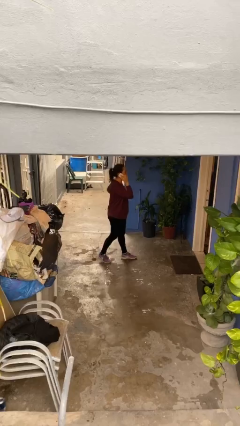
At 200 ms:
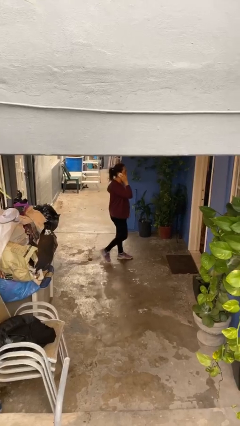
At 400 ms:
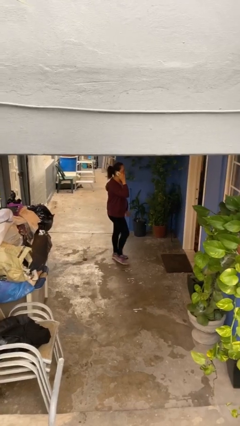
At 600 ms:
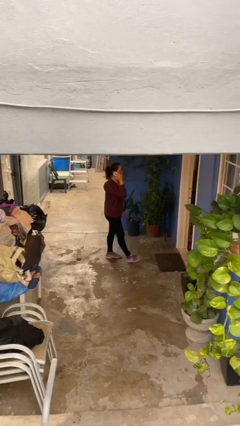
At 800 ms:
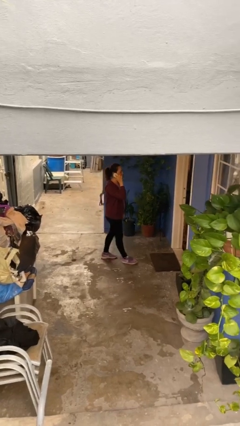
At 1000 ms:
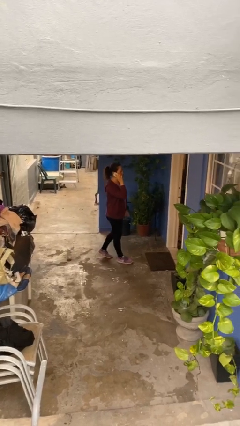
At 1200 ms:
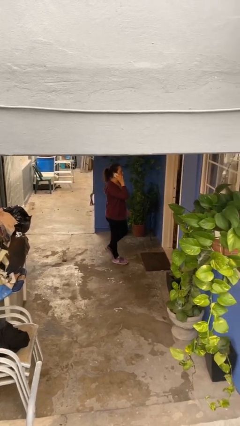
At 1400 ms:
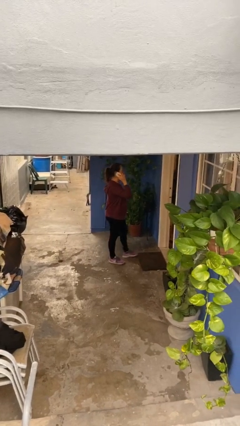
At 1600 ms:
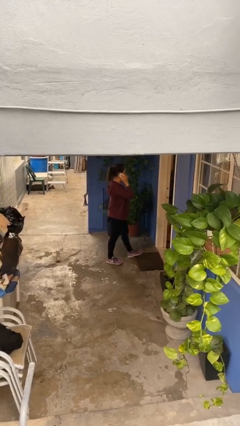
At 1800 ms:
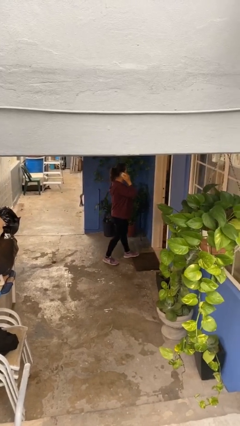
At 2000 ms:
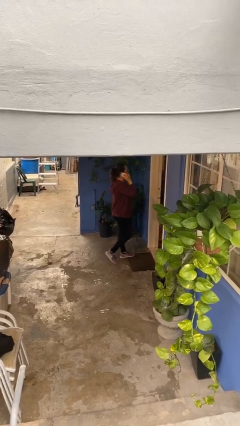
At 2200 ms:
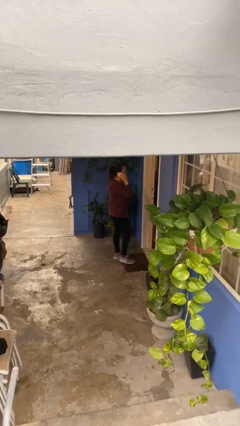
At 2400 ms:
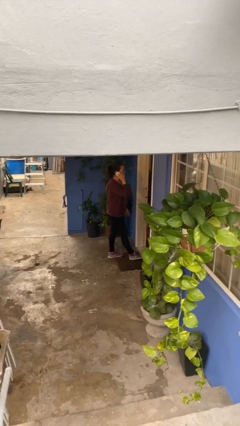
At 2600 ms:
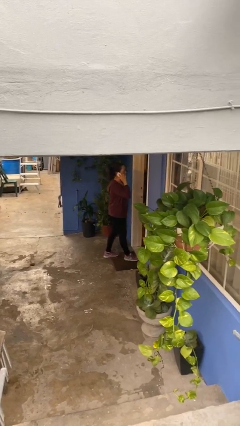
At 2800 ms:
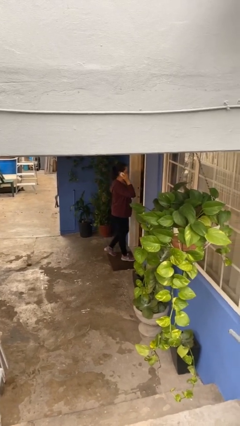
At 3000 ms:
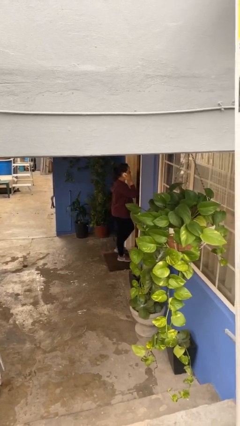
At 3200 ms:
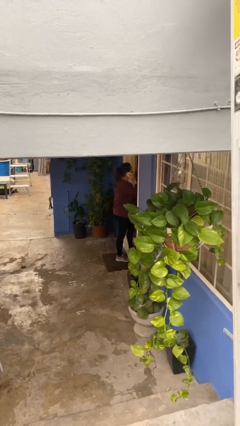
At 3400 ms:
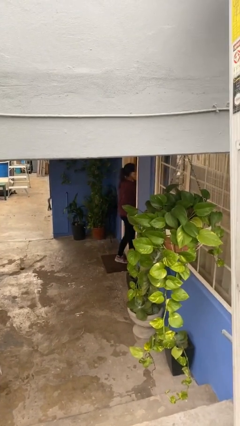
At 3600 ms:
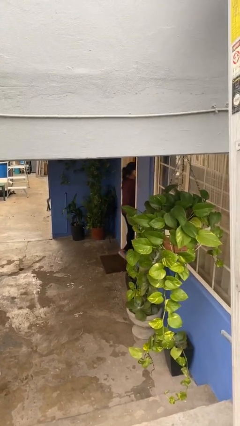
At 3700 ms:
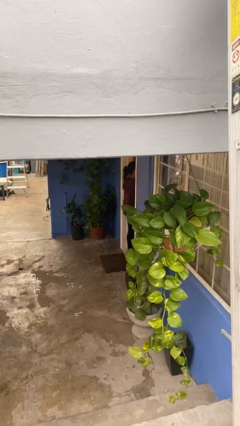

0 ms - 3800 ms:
person exits scene through structure

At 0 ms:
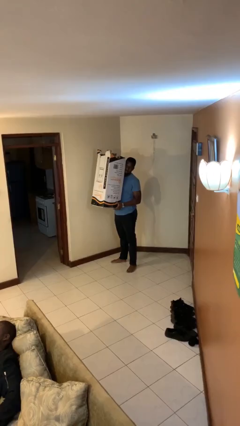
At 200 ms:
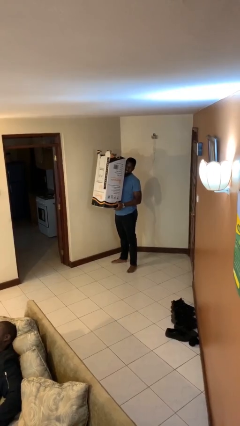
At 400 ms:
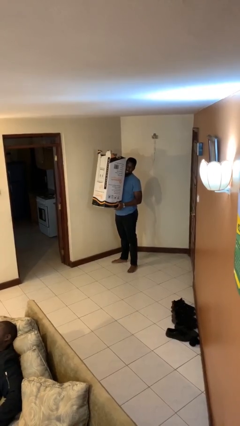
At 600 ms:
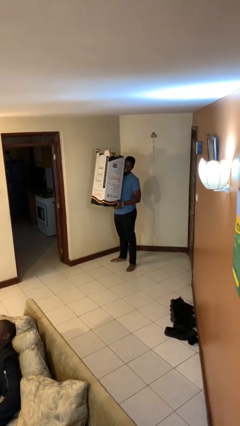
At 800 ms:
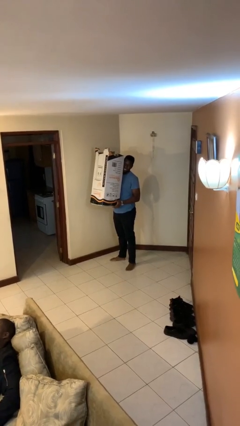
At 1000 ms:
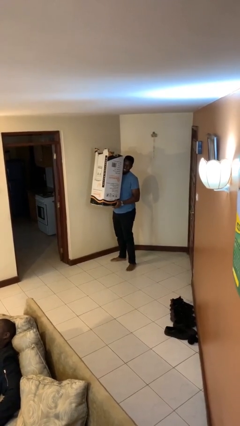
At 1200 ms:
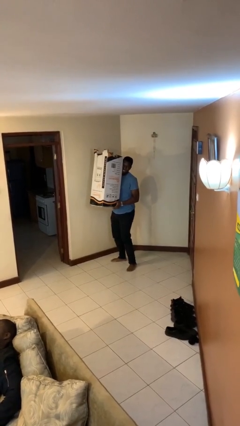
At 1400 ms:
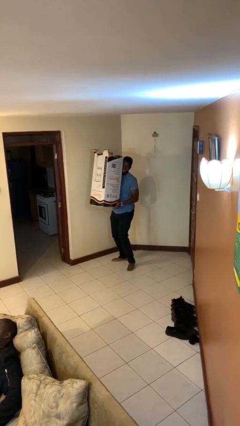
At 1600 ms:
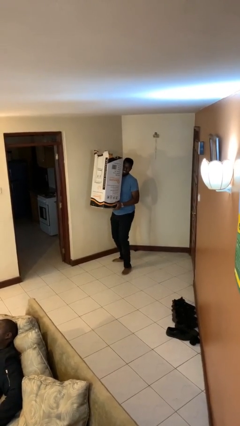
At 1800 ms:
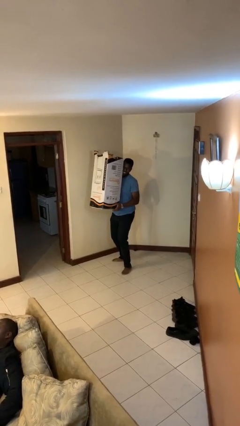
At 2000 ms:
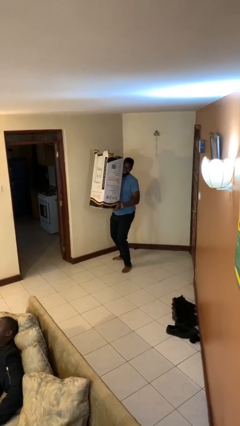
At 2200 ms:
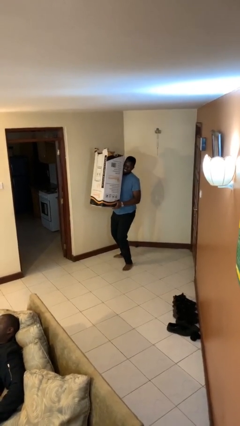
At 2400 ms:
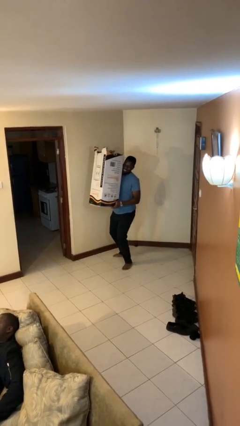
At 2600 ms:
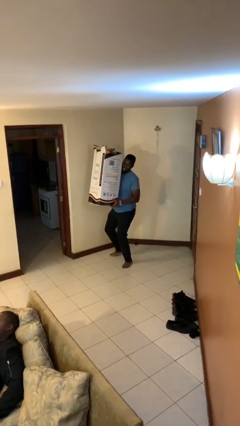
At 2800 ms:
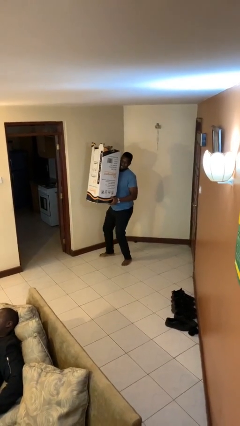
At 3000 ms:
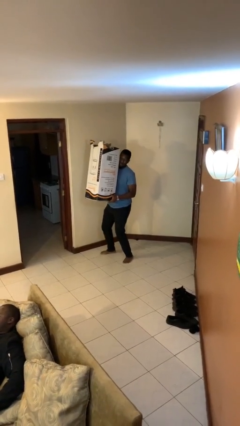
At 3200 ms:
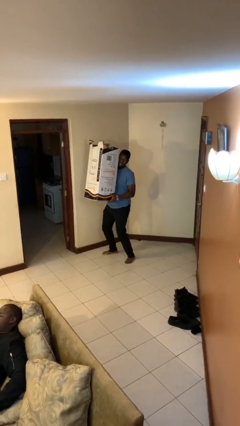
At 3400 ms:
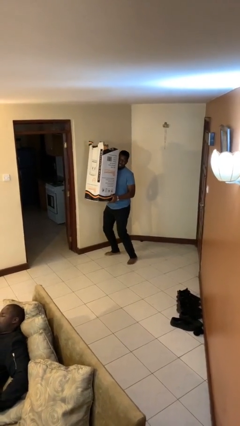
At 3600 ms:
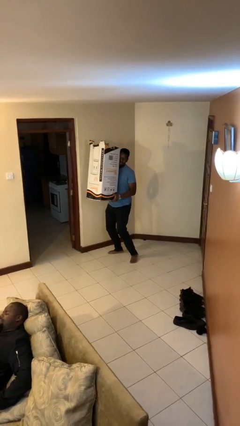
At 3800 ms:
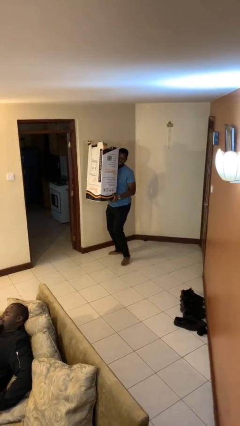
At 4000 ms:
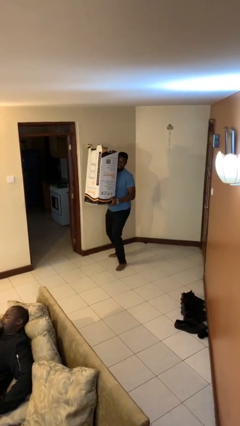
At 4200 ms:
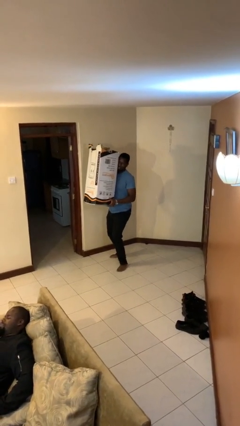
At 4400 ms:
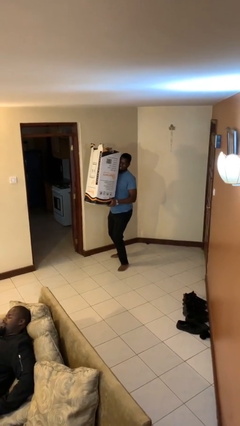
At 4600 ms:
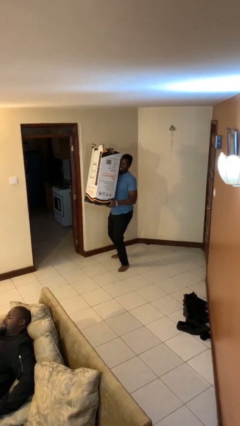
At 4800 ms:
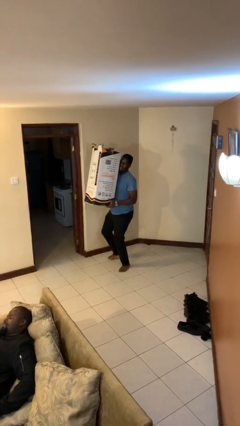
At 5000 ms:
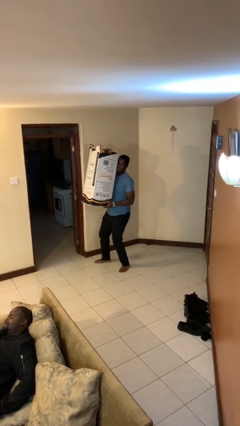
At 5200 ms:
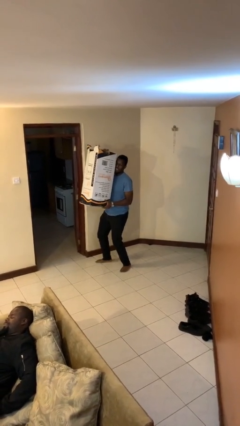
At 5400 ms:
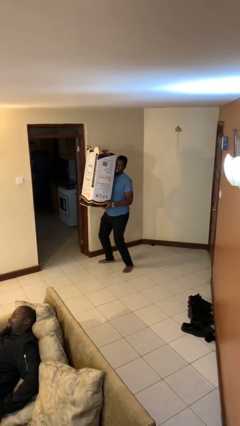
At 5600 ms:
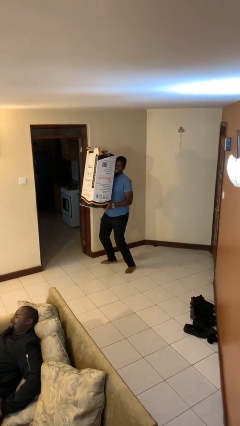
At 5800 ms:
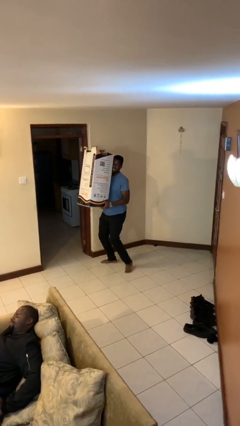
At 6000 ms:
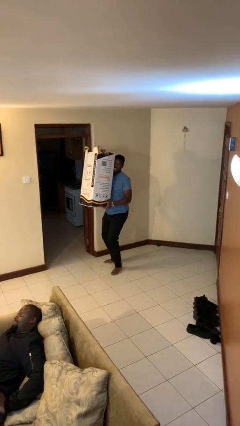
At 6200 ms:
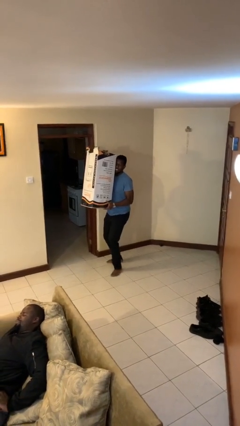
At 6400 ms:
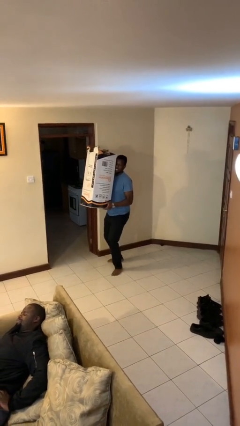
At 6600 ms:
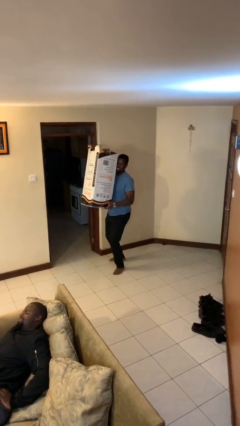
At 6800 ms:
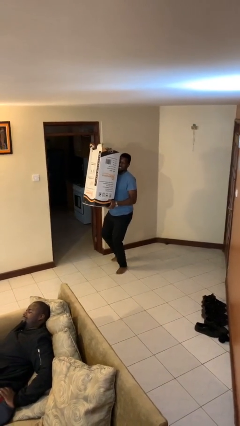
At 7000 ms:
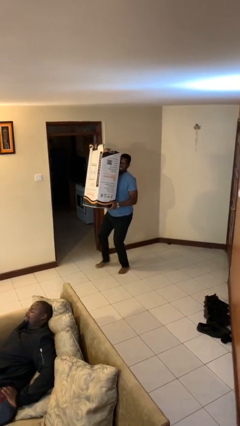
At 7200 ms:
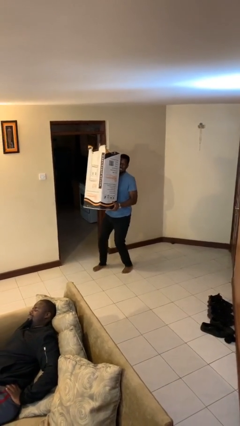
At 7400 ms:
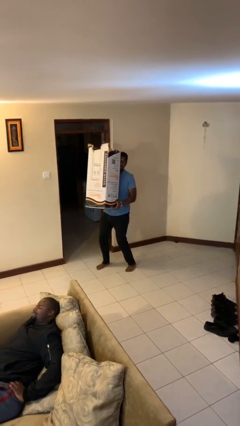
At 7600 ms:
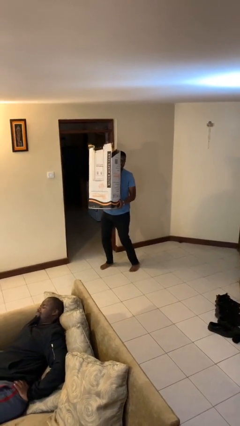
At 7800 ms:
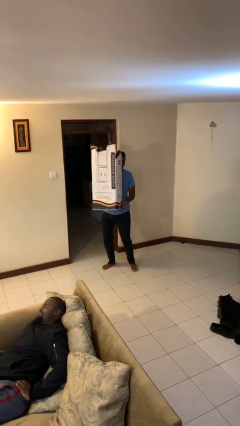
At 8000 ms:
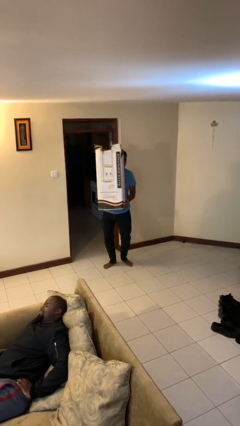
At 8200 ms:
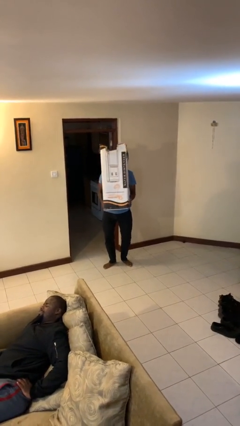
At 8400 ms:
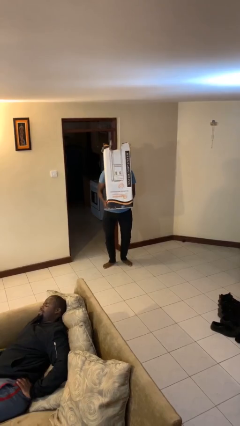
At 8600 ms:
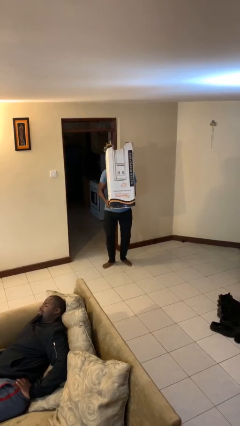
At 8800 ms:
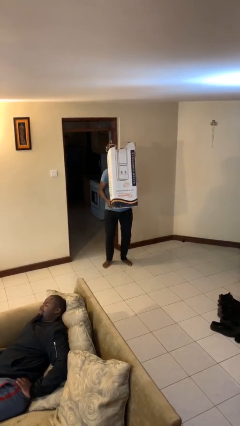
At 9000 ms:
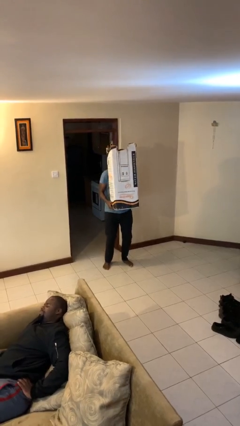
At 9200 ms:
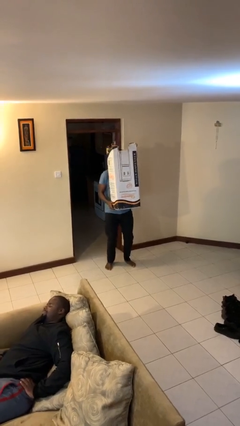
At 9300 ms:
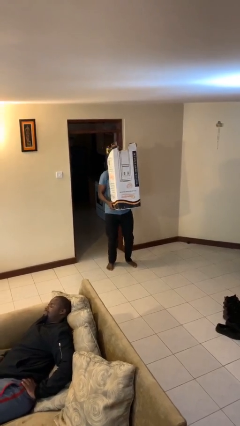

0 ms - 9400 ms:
person carries heavy object

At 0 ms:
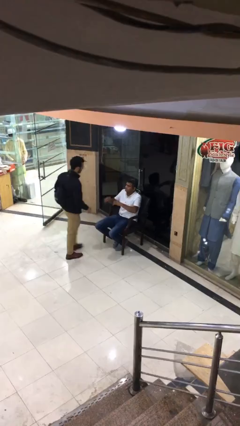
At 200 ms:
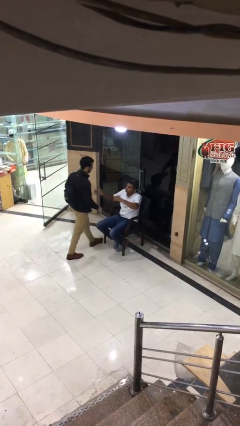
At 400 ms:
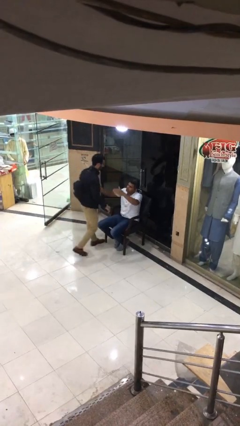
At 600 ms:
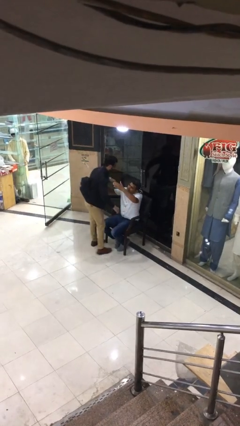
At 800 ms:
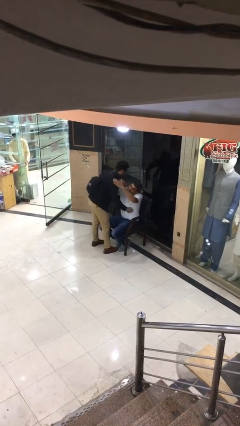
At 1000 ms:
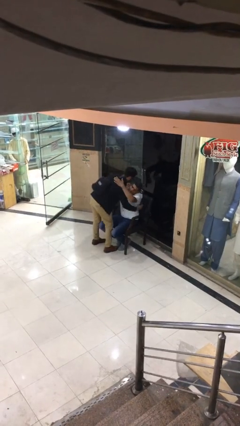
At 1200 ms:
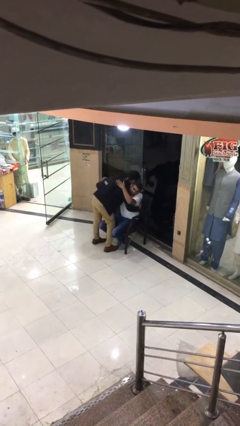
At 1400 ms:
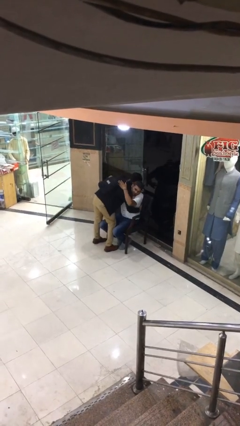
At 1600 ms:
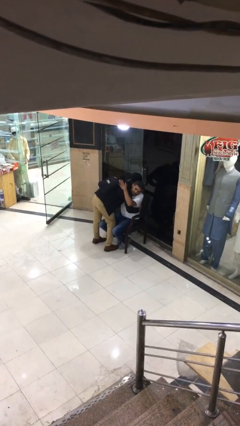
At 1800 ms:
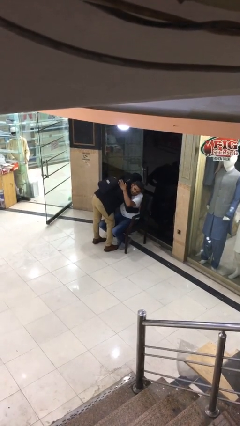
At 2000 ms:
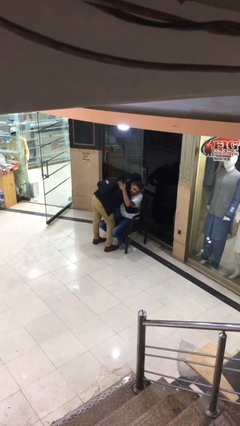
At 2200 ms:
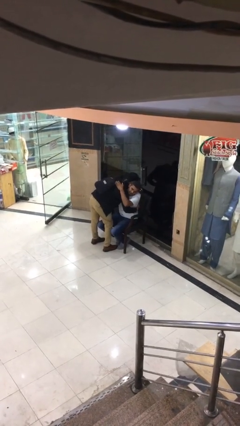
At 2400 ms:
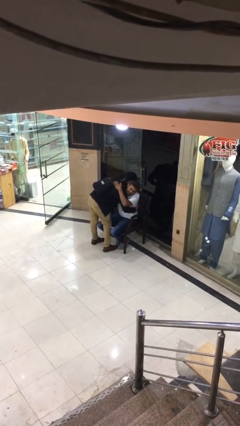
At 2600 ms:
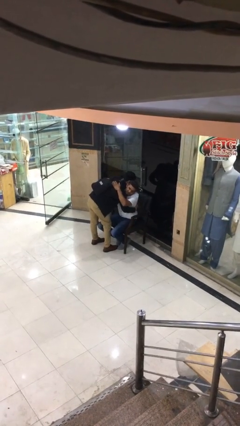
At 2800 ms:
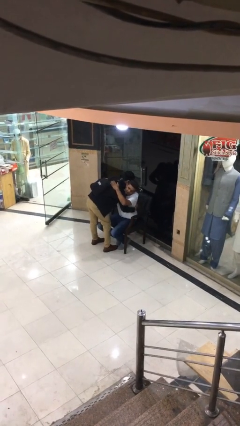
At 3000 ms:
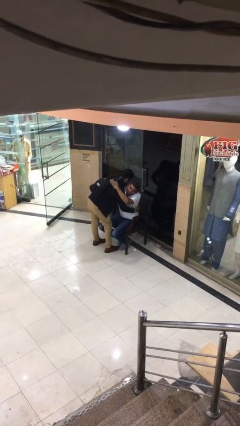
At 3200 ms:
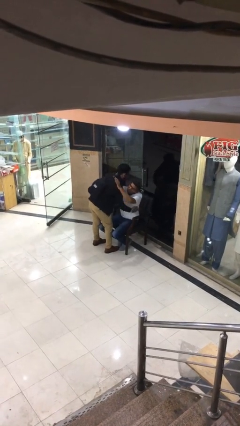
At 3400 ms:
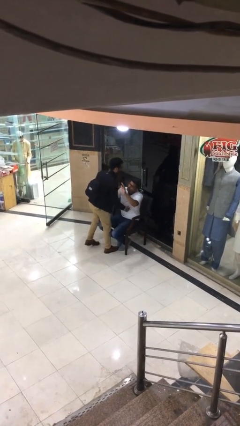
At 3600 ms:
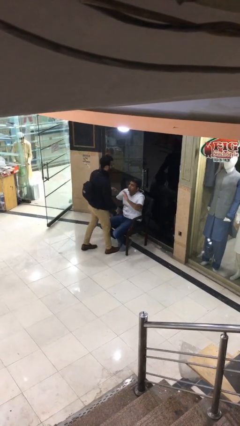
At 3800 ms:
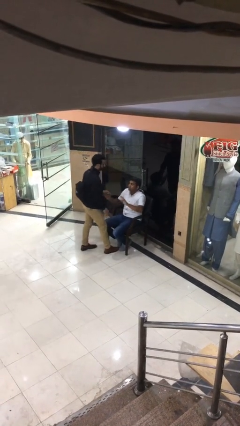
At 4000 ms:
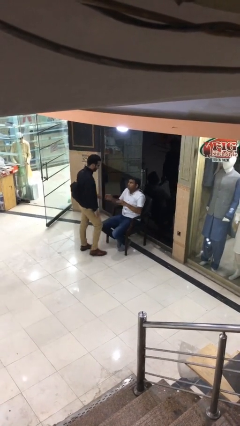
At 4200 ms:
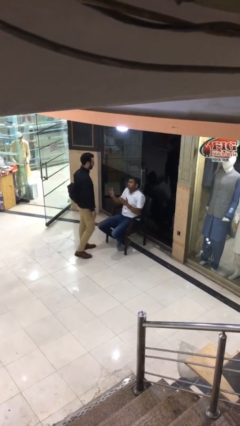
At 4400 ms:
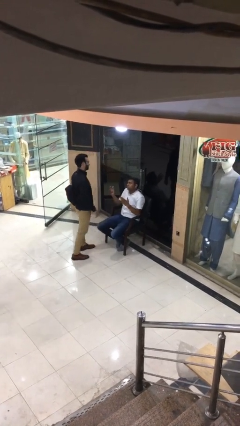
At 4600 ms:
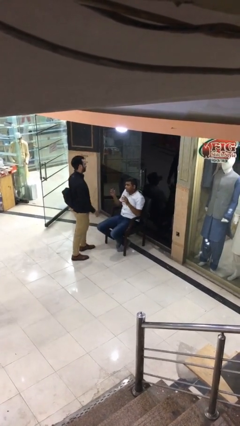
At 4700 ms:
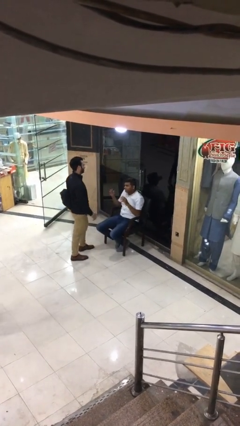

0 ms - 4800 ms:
person embraces person
